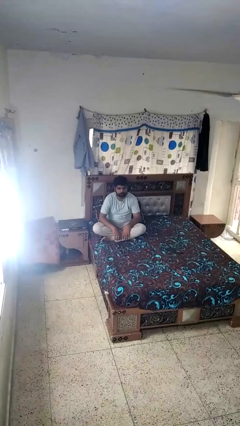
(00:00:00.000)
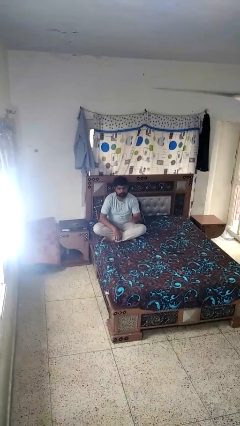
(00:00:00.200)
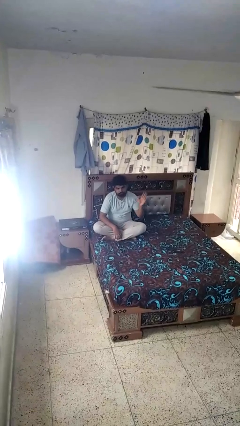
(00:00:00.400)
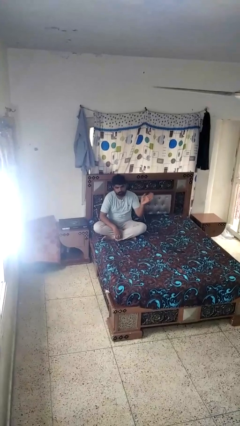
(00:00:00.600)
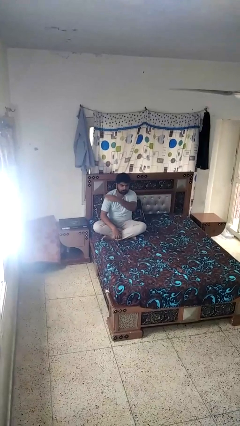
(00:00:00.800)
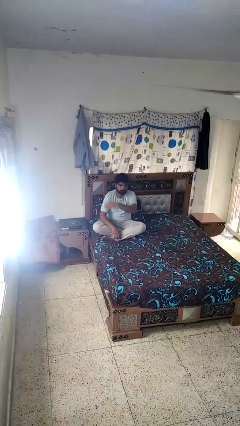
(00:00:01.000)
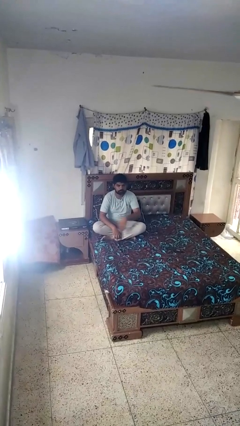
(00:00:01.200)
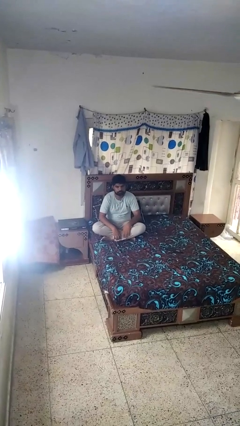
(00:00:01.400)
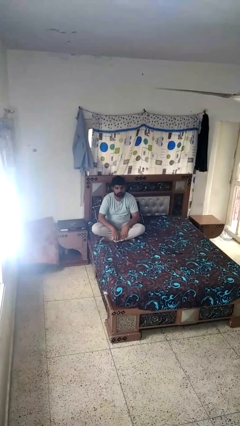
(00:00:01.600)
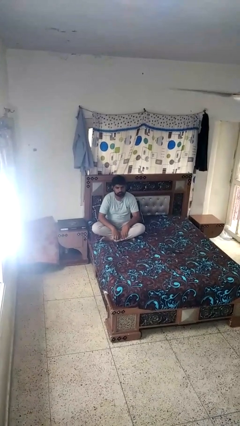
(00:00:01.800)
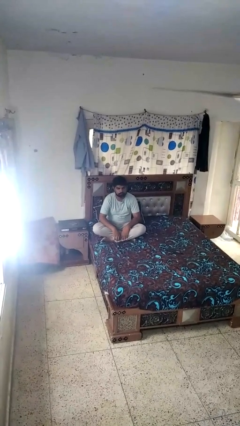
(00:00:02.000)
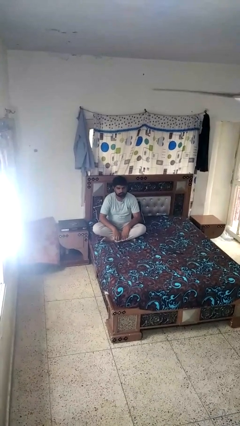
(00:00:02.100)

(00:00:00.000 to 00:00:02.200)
person gestures swipe right

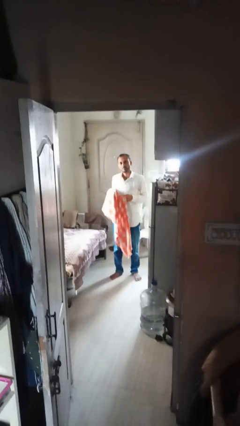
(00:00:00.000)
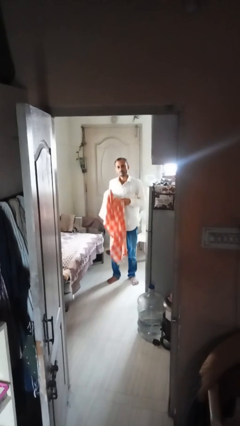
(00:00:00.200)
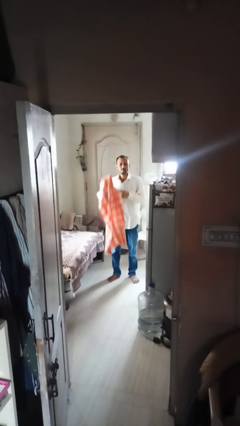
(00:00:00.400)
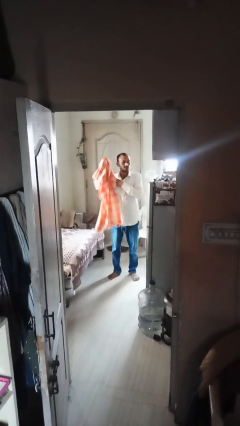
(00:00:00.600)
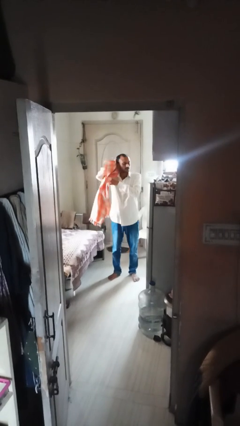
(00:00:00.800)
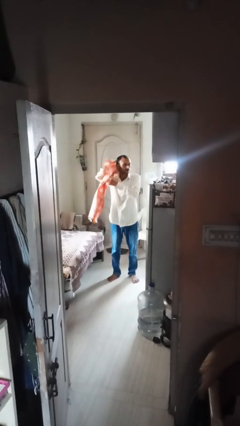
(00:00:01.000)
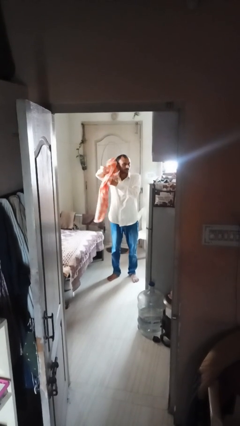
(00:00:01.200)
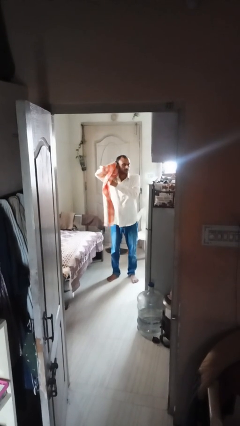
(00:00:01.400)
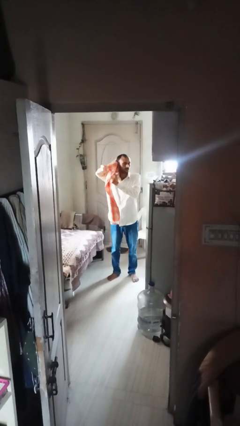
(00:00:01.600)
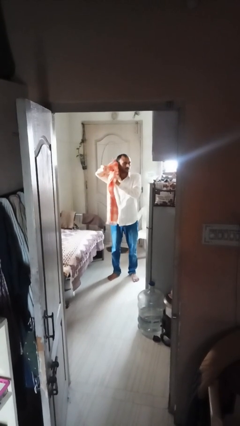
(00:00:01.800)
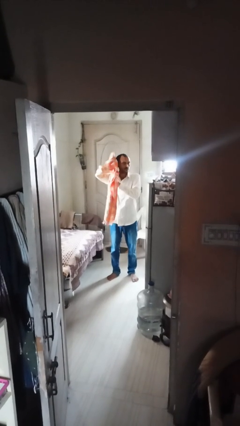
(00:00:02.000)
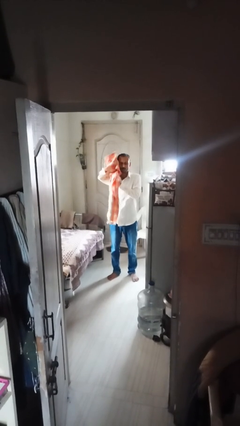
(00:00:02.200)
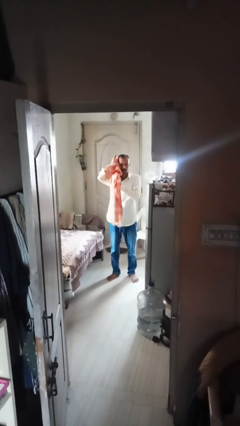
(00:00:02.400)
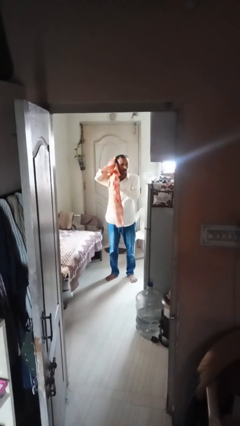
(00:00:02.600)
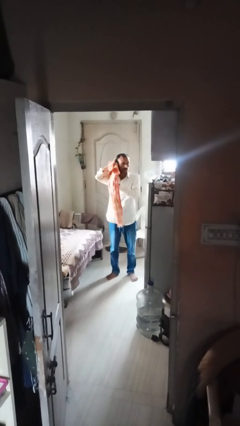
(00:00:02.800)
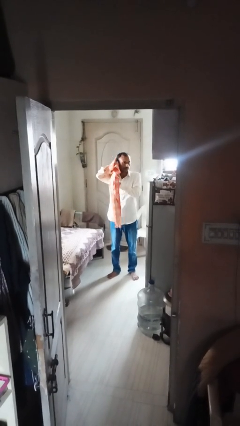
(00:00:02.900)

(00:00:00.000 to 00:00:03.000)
person dries hair with towel

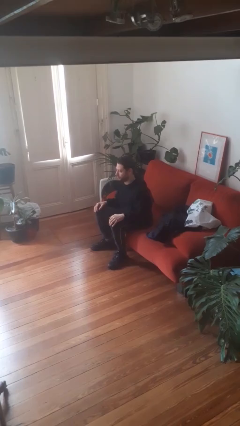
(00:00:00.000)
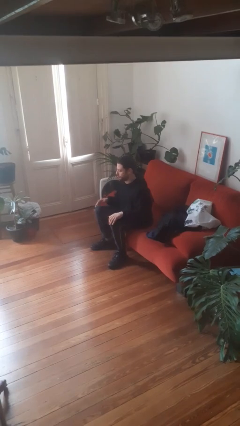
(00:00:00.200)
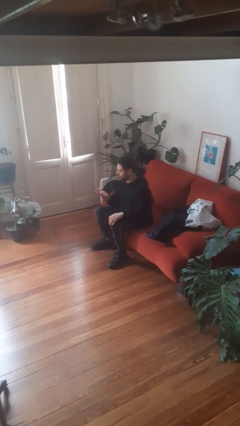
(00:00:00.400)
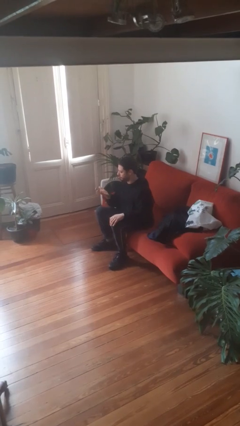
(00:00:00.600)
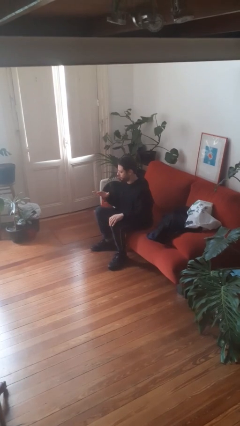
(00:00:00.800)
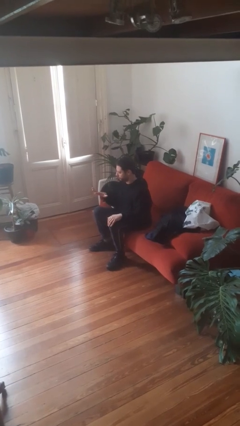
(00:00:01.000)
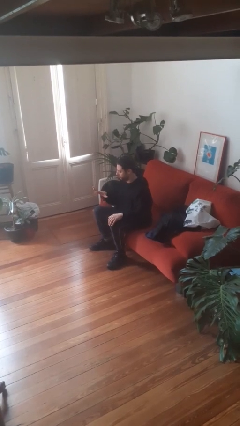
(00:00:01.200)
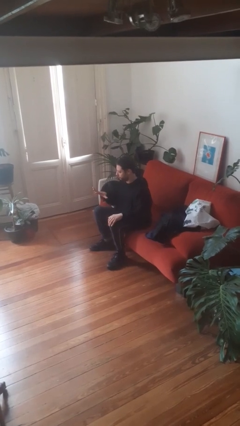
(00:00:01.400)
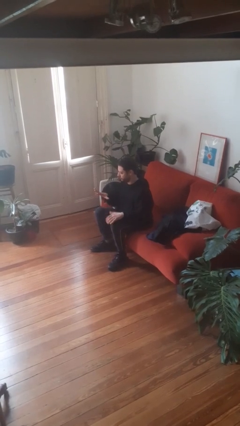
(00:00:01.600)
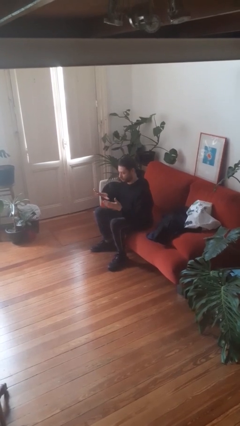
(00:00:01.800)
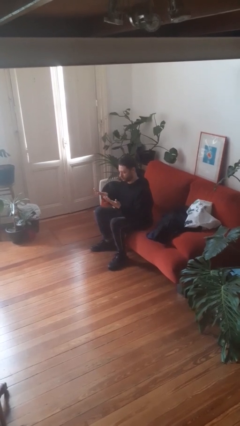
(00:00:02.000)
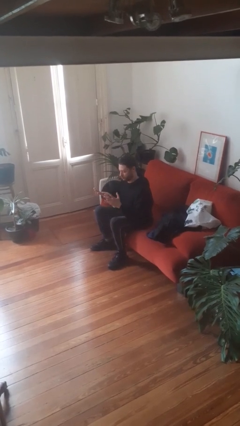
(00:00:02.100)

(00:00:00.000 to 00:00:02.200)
person looks at hands in lap

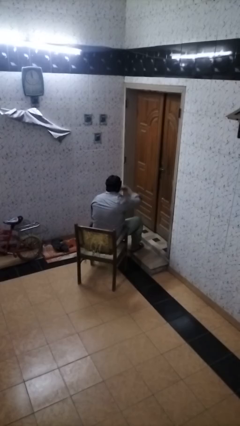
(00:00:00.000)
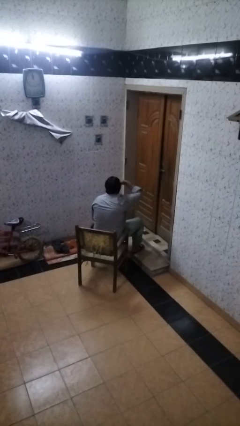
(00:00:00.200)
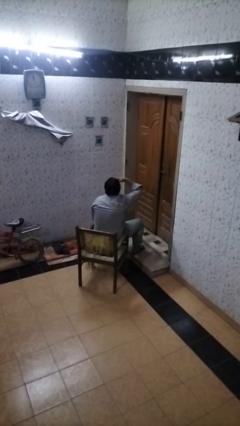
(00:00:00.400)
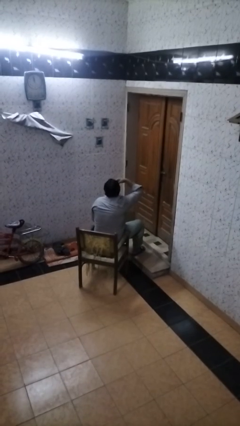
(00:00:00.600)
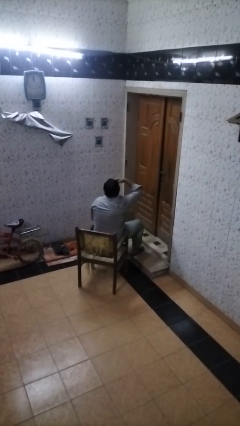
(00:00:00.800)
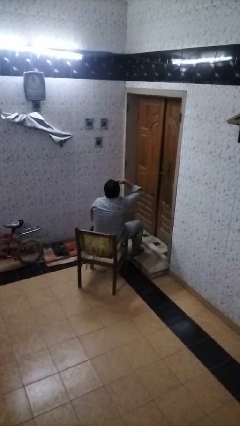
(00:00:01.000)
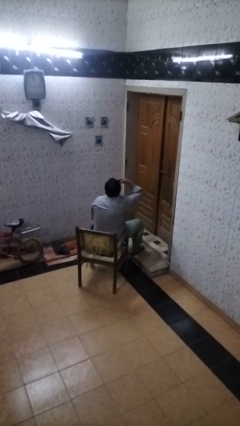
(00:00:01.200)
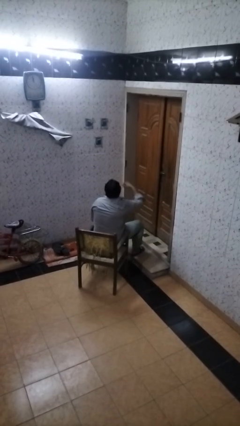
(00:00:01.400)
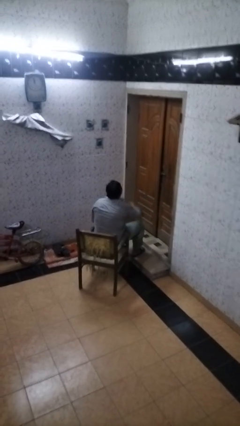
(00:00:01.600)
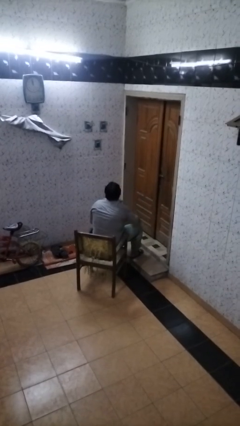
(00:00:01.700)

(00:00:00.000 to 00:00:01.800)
person eats with hands

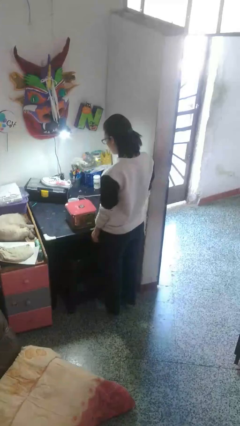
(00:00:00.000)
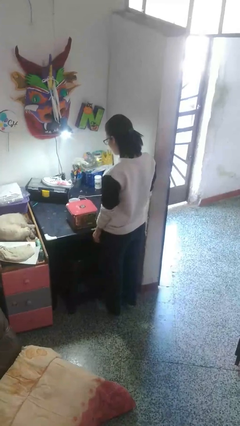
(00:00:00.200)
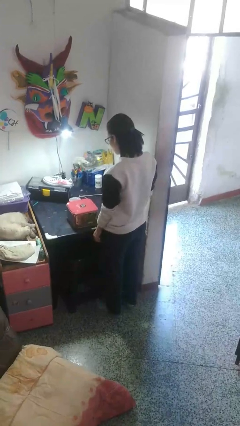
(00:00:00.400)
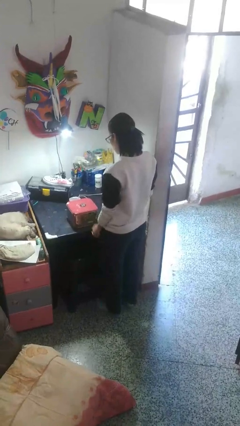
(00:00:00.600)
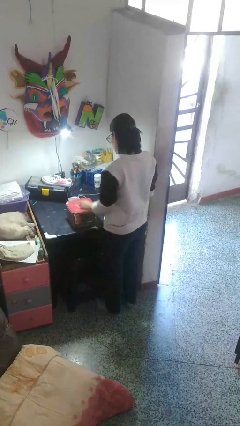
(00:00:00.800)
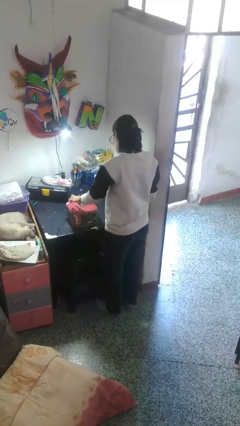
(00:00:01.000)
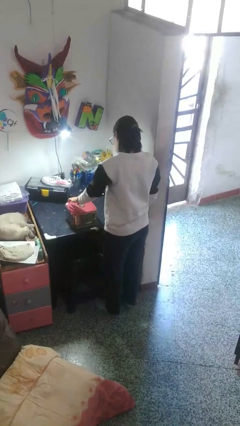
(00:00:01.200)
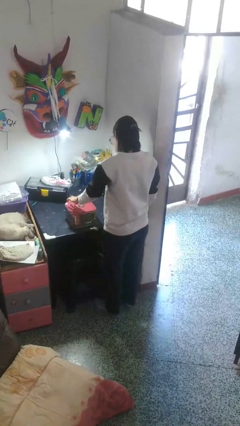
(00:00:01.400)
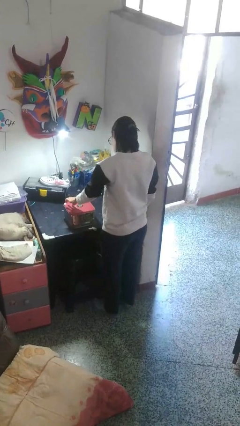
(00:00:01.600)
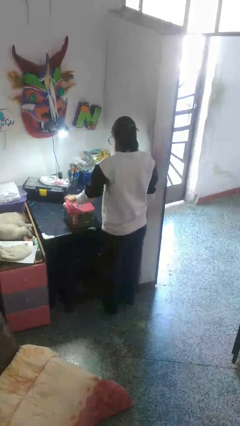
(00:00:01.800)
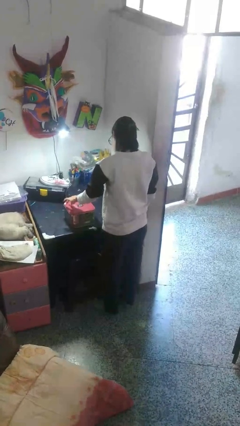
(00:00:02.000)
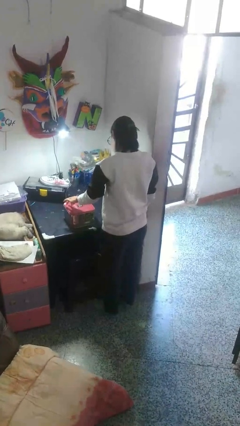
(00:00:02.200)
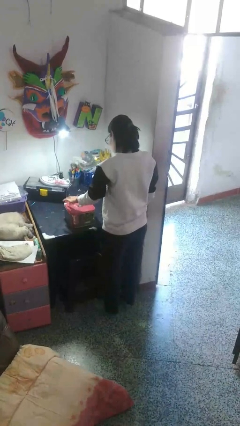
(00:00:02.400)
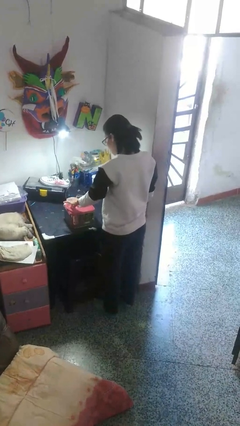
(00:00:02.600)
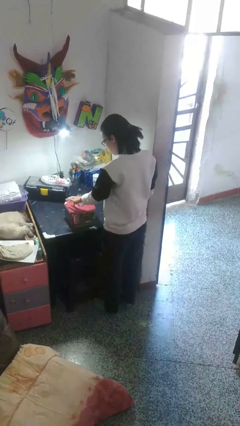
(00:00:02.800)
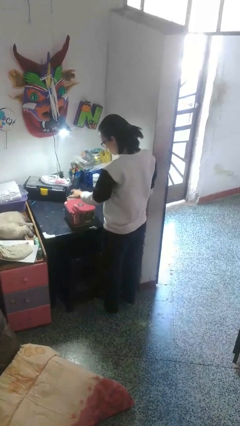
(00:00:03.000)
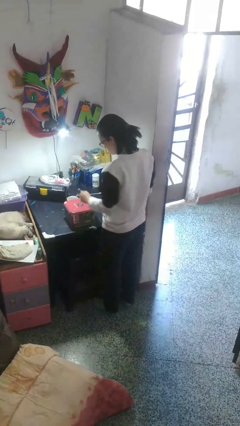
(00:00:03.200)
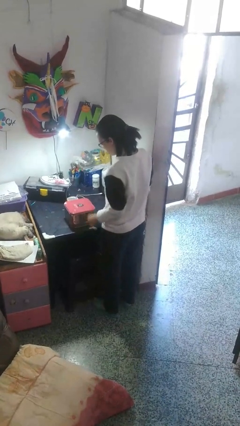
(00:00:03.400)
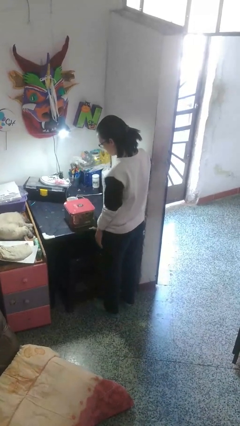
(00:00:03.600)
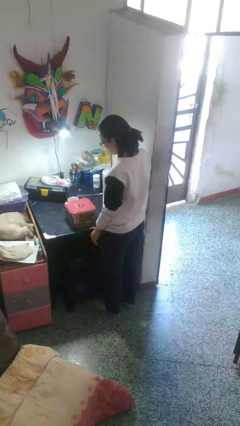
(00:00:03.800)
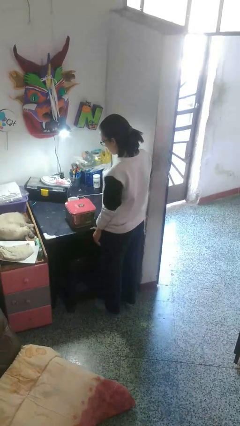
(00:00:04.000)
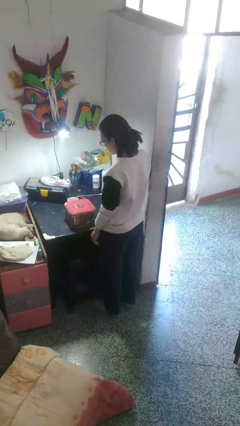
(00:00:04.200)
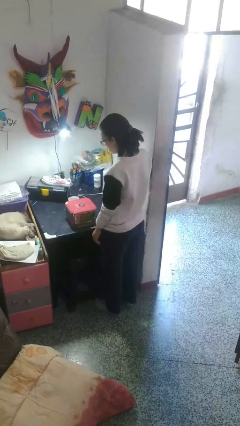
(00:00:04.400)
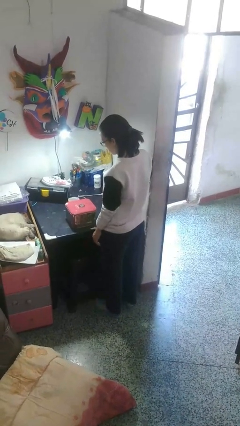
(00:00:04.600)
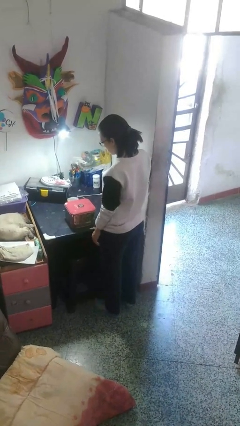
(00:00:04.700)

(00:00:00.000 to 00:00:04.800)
person taps object with finger

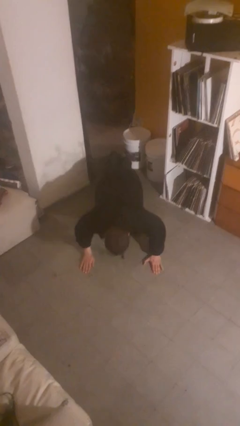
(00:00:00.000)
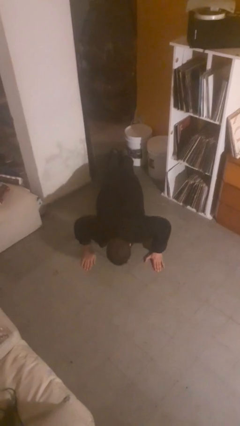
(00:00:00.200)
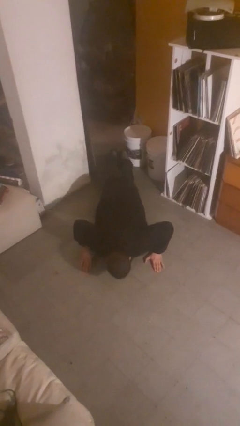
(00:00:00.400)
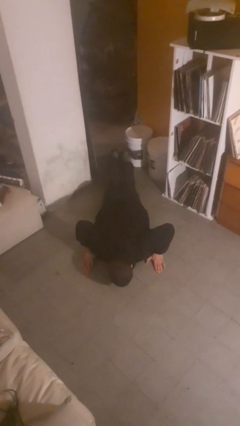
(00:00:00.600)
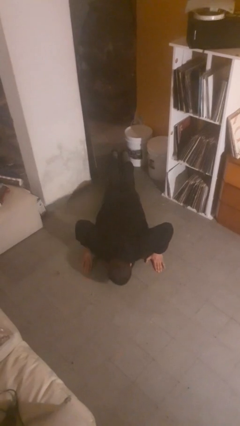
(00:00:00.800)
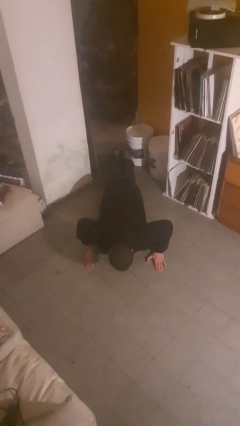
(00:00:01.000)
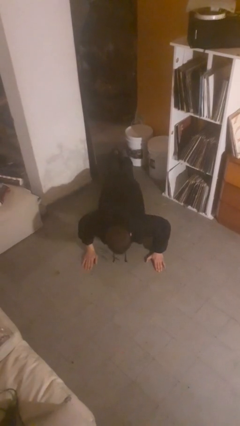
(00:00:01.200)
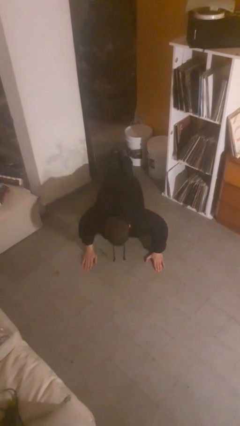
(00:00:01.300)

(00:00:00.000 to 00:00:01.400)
person exercises with pushup

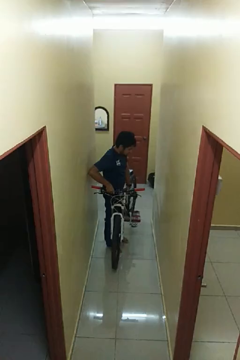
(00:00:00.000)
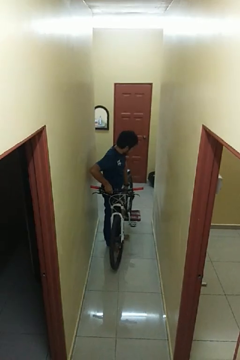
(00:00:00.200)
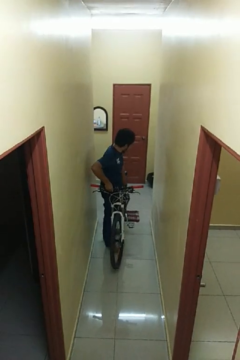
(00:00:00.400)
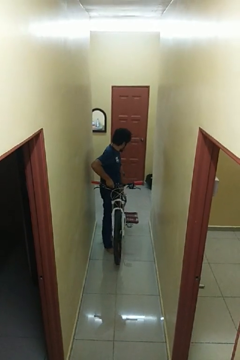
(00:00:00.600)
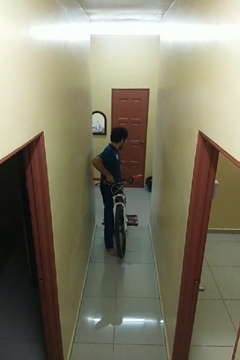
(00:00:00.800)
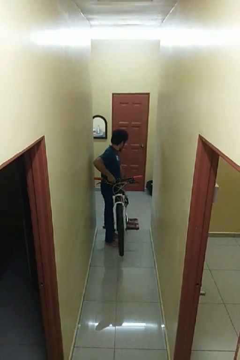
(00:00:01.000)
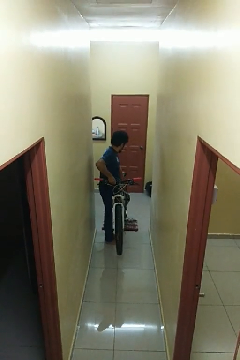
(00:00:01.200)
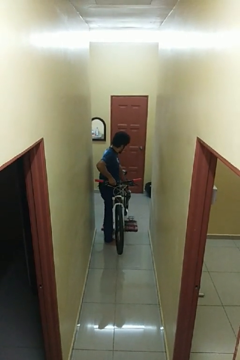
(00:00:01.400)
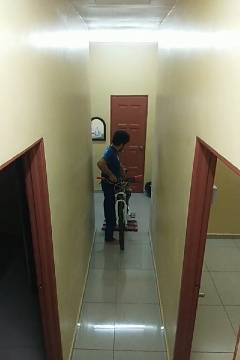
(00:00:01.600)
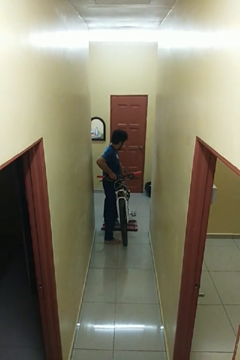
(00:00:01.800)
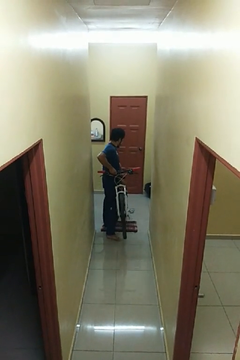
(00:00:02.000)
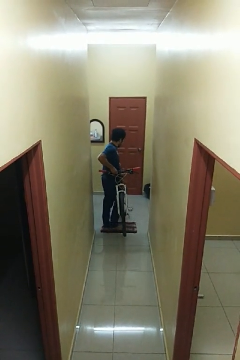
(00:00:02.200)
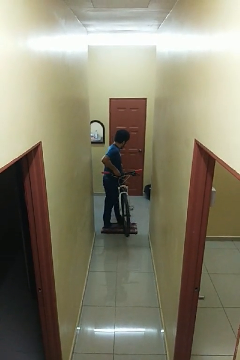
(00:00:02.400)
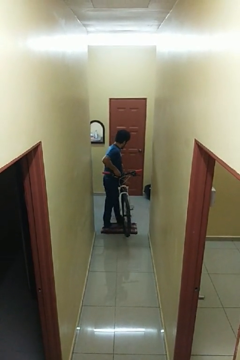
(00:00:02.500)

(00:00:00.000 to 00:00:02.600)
person carries bicycle
